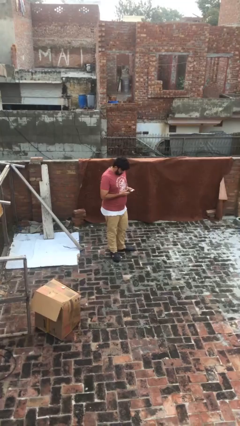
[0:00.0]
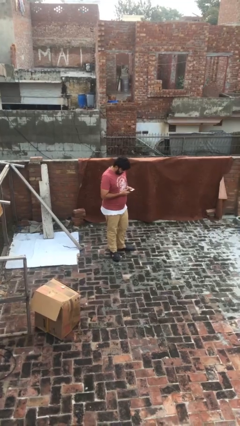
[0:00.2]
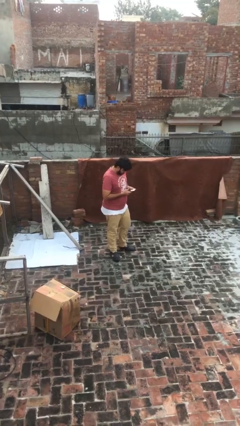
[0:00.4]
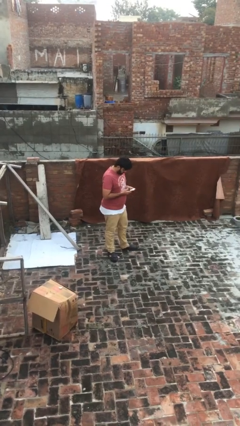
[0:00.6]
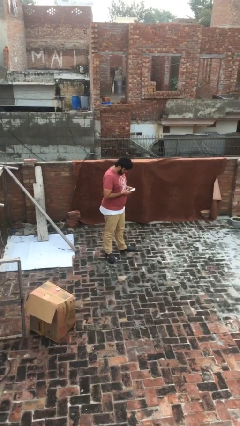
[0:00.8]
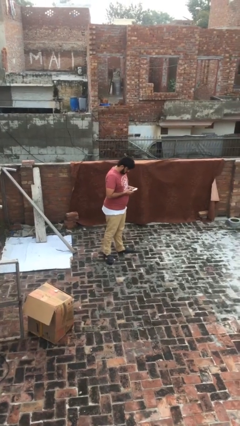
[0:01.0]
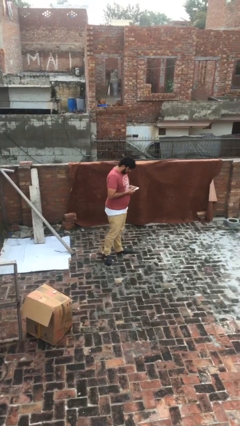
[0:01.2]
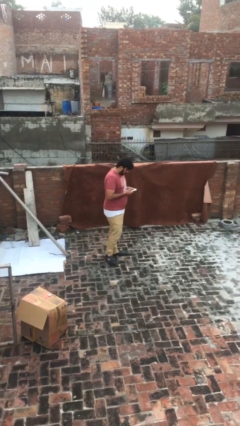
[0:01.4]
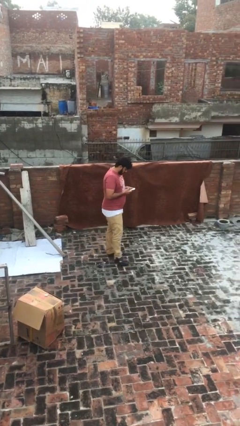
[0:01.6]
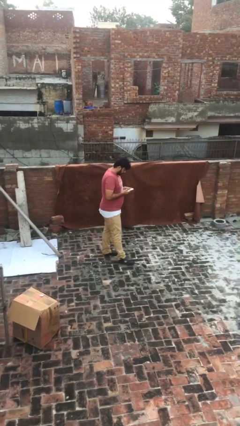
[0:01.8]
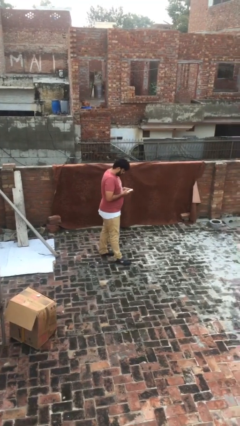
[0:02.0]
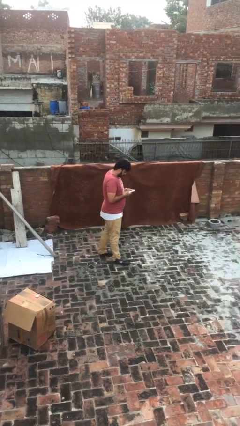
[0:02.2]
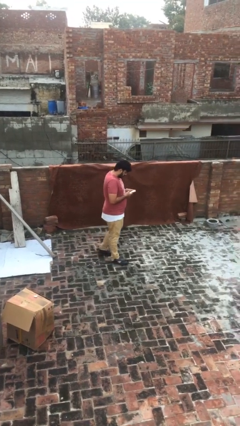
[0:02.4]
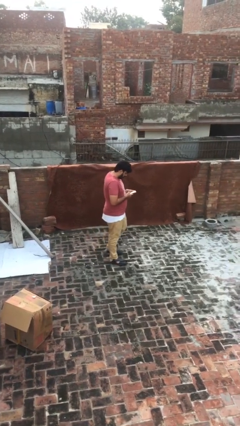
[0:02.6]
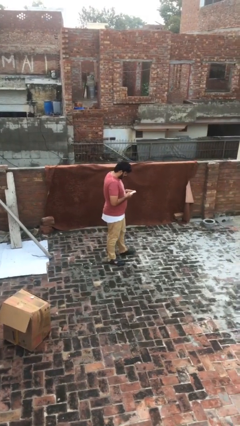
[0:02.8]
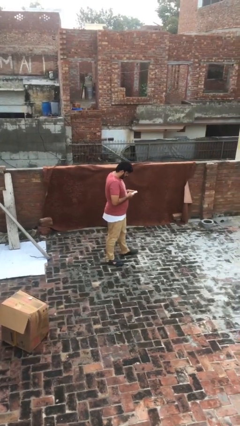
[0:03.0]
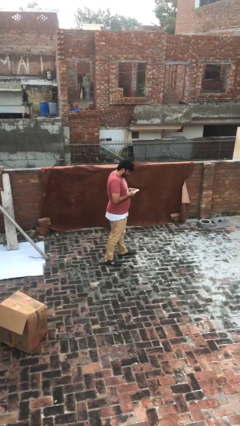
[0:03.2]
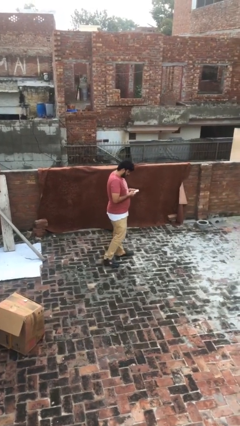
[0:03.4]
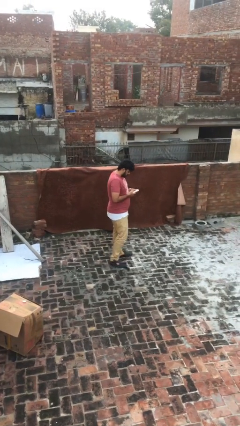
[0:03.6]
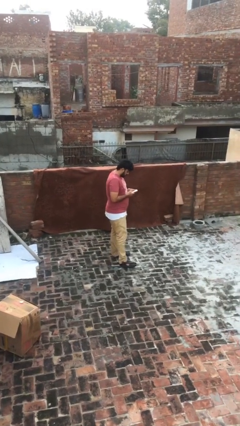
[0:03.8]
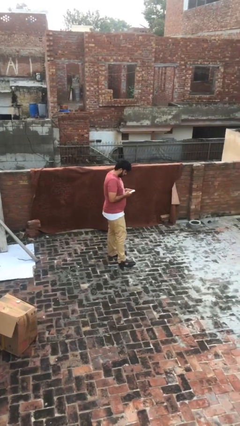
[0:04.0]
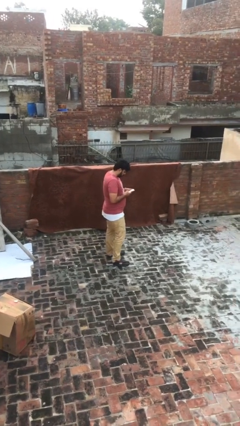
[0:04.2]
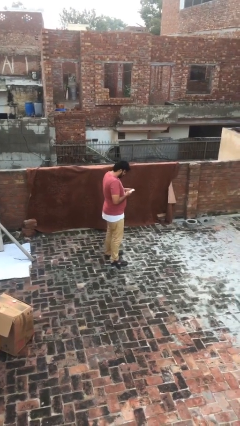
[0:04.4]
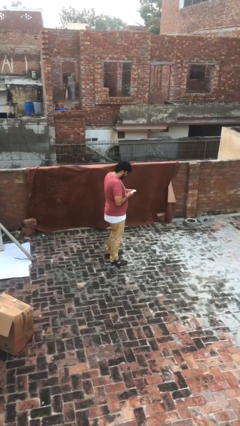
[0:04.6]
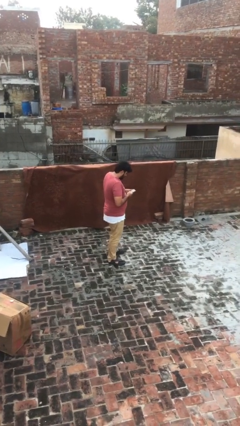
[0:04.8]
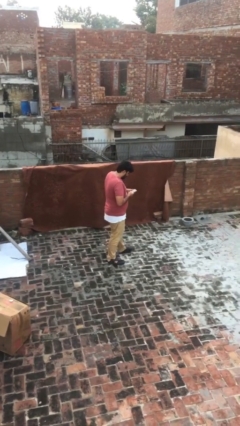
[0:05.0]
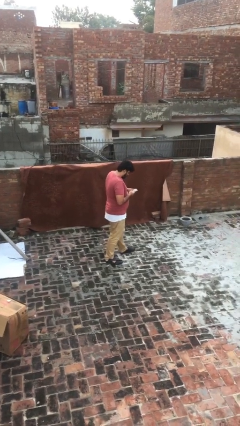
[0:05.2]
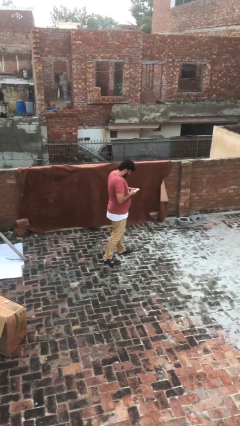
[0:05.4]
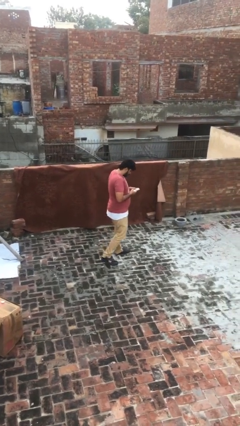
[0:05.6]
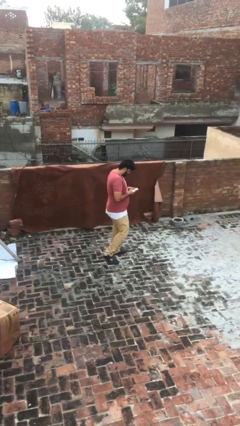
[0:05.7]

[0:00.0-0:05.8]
person texts on phone

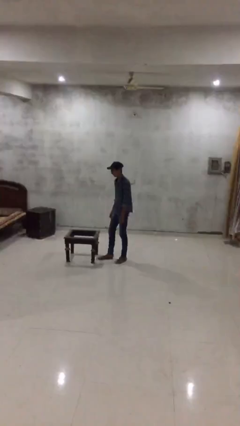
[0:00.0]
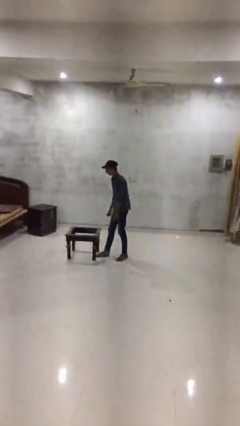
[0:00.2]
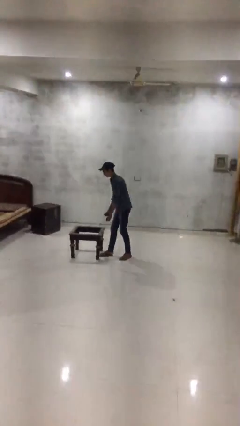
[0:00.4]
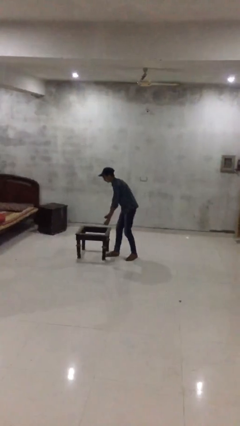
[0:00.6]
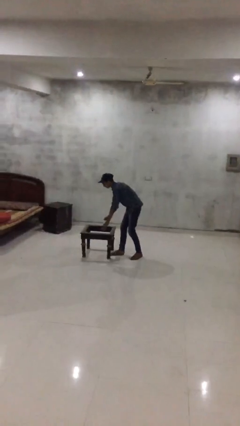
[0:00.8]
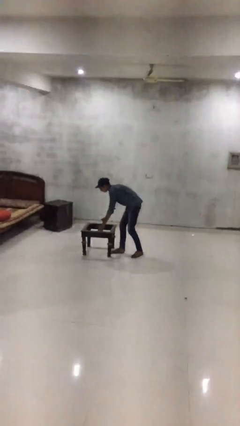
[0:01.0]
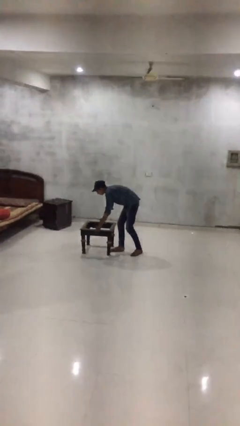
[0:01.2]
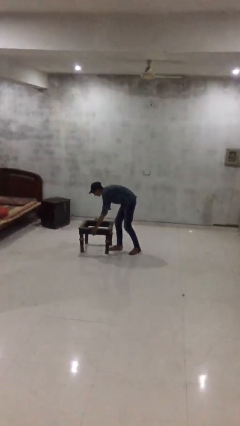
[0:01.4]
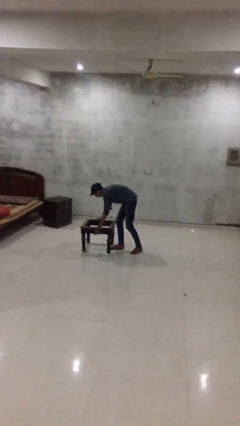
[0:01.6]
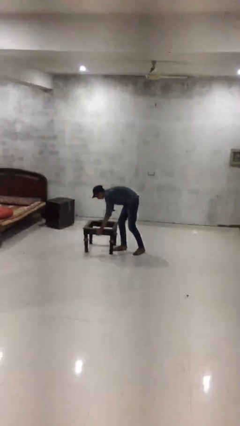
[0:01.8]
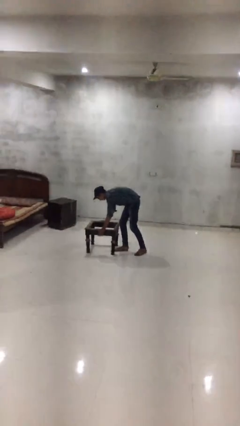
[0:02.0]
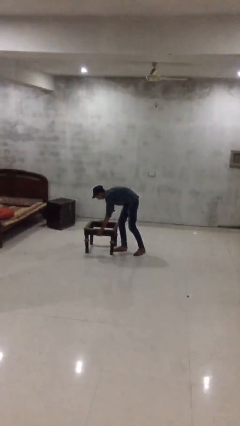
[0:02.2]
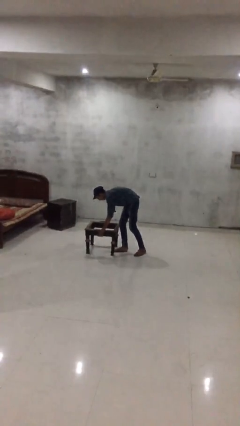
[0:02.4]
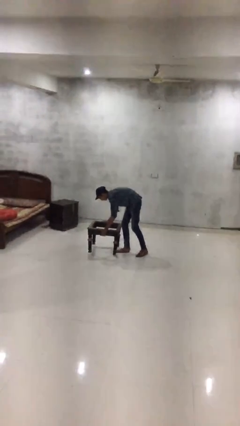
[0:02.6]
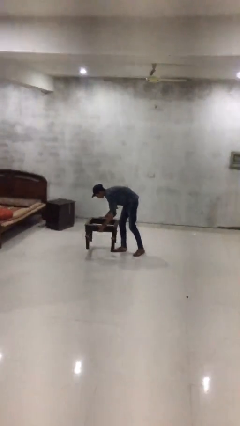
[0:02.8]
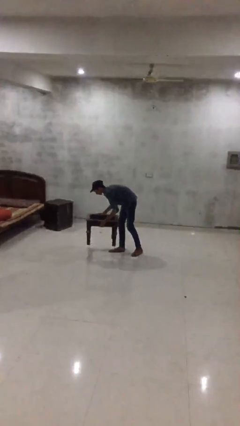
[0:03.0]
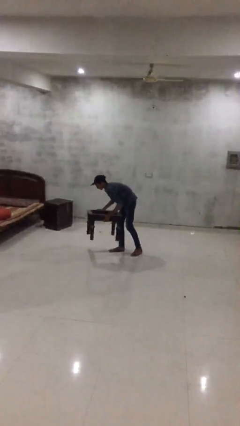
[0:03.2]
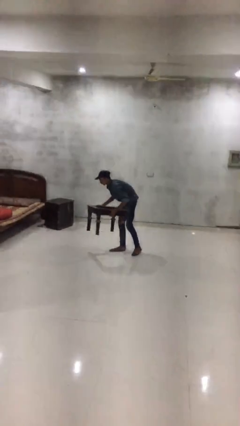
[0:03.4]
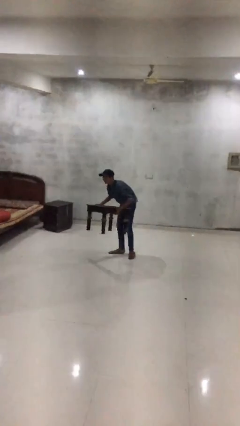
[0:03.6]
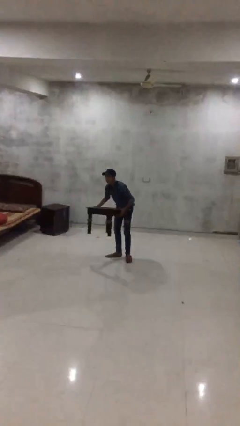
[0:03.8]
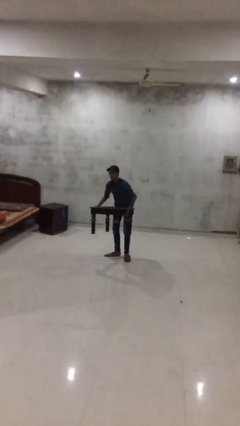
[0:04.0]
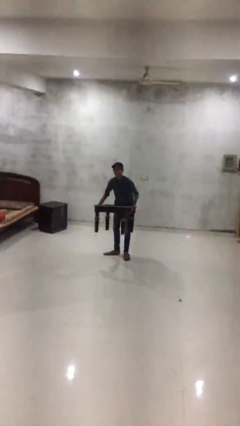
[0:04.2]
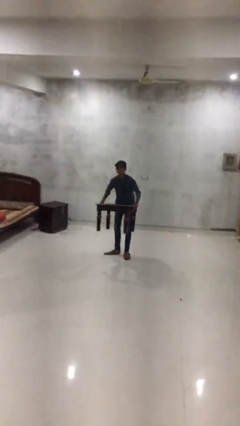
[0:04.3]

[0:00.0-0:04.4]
person picks up object from floor

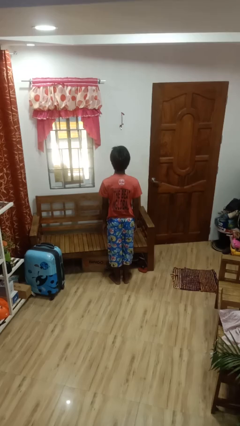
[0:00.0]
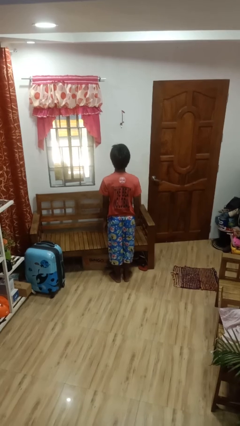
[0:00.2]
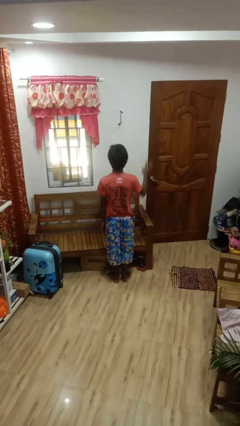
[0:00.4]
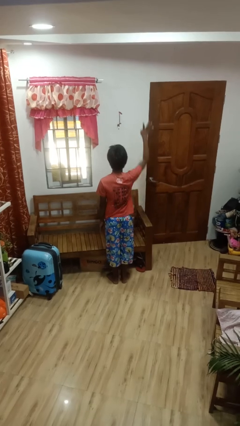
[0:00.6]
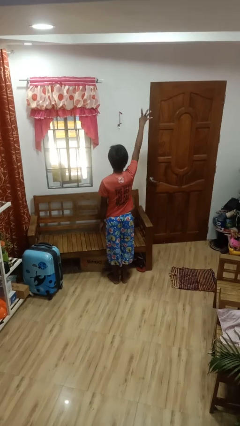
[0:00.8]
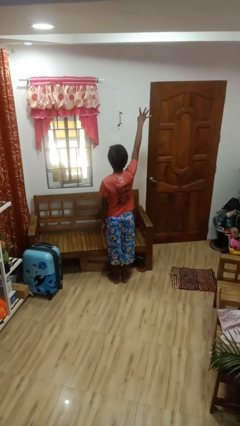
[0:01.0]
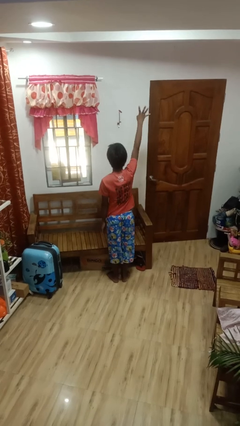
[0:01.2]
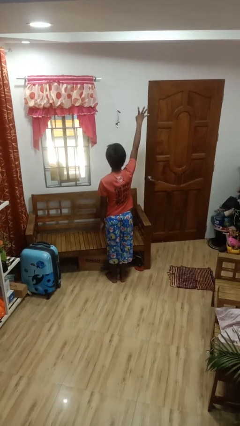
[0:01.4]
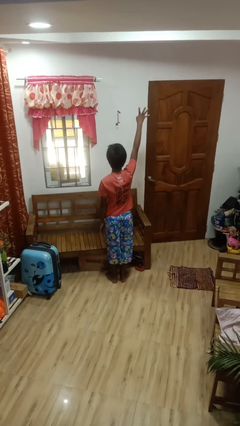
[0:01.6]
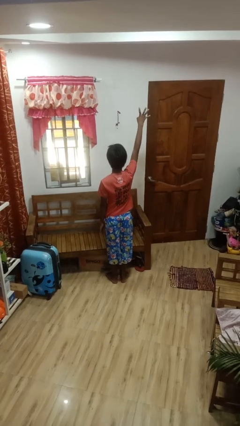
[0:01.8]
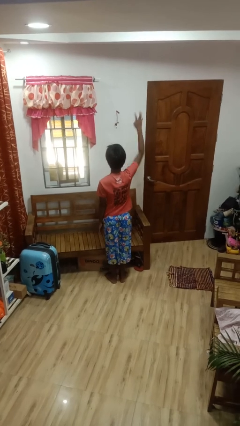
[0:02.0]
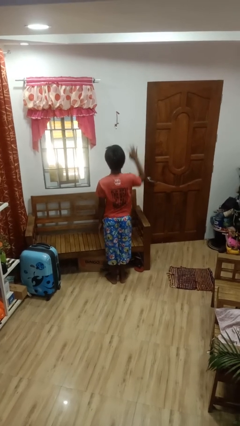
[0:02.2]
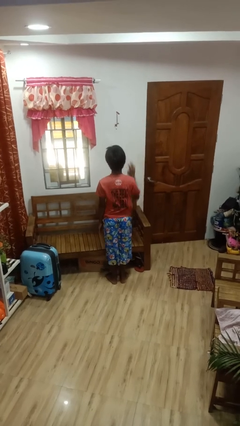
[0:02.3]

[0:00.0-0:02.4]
person gestures number four

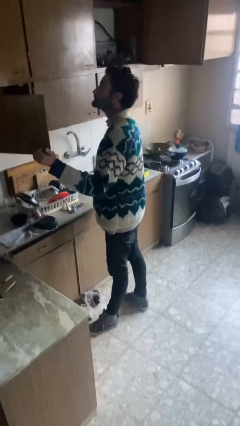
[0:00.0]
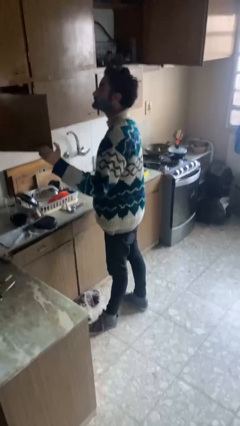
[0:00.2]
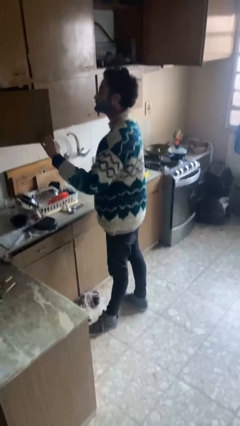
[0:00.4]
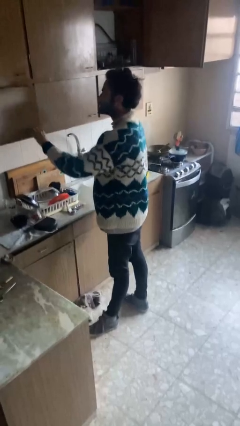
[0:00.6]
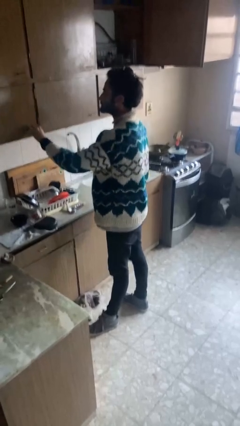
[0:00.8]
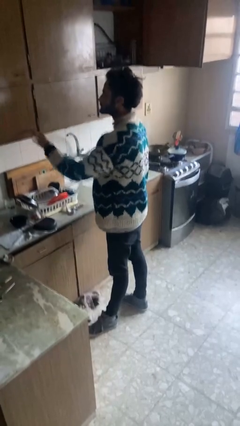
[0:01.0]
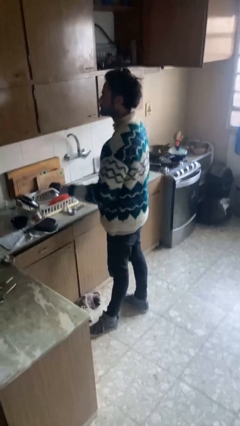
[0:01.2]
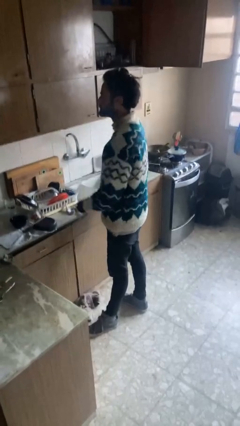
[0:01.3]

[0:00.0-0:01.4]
person closes cabinet

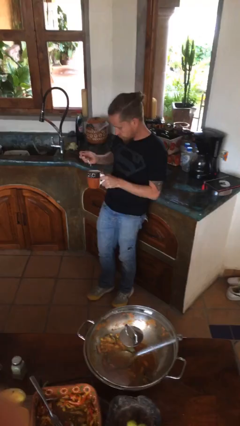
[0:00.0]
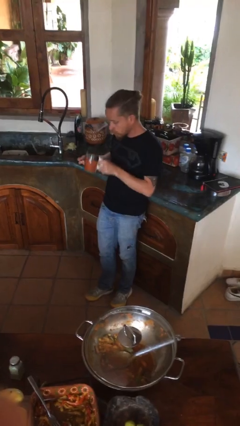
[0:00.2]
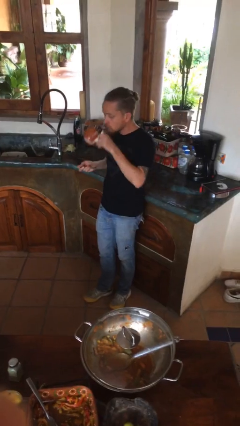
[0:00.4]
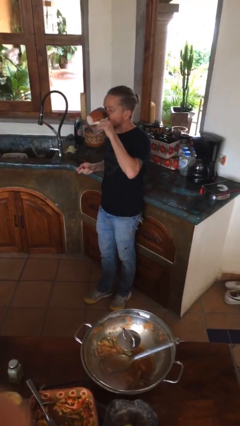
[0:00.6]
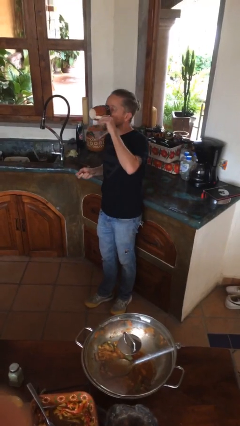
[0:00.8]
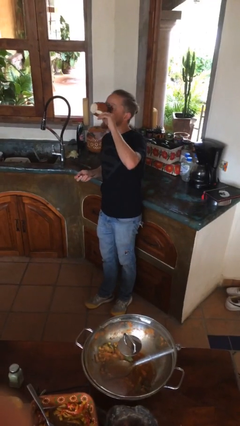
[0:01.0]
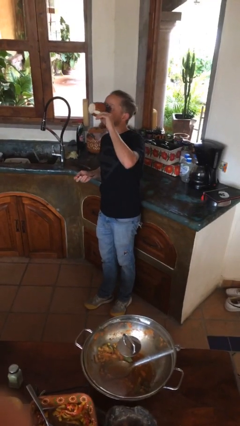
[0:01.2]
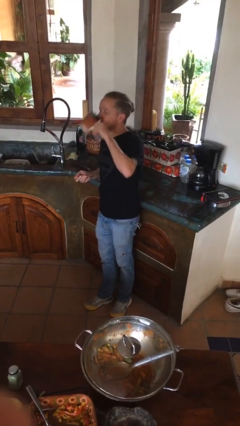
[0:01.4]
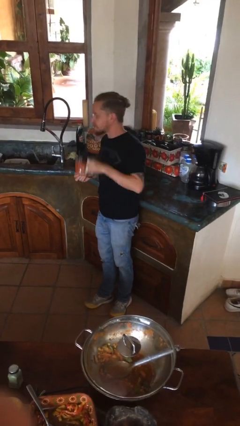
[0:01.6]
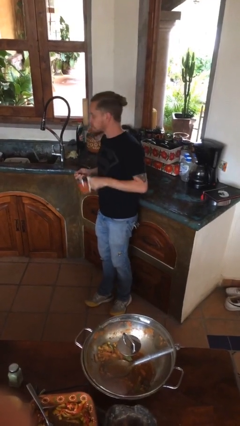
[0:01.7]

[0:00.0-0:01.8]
person drinks from mug

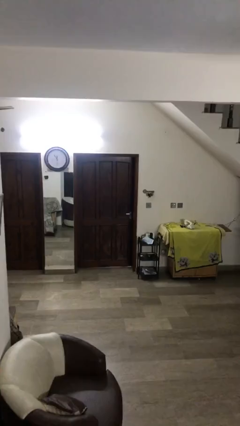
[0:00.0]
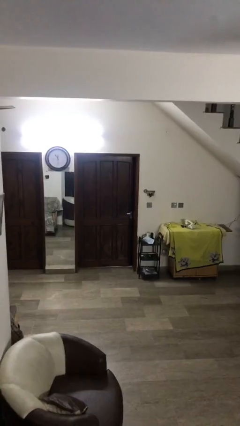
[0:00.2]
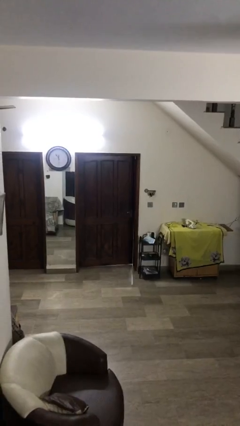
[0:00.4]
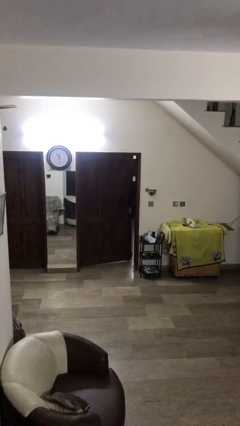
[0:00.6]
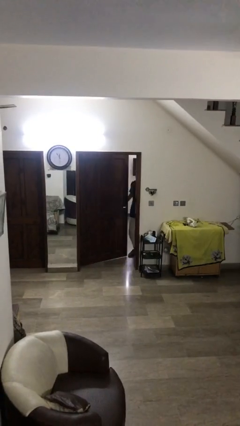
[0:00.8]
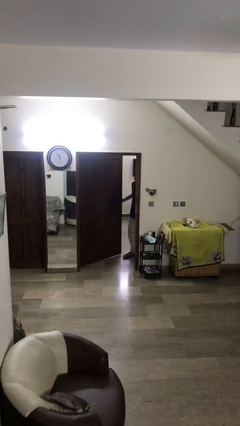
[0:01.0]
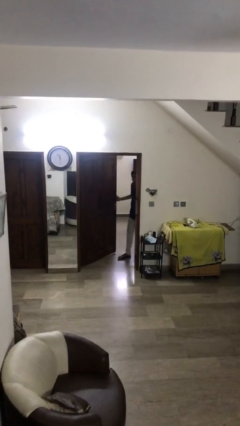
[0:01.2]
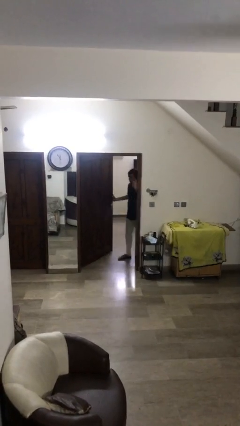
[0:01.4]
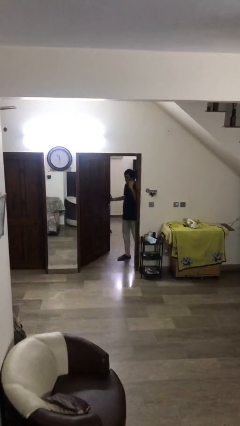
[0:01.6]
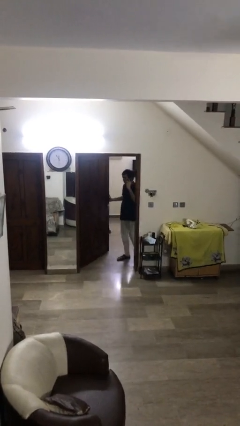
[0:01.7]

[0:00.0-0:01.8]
person opens facility door
